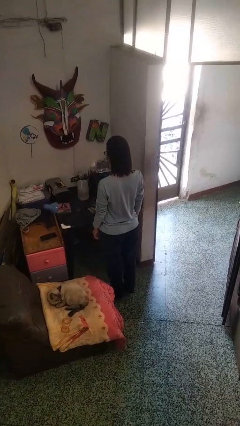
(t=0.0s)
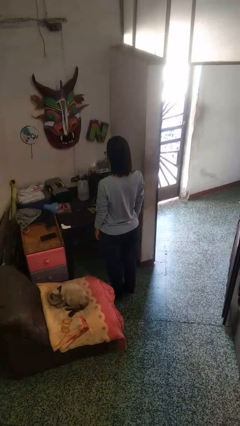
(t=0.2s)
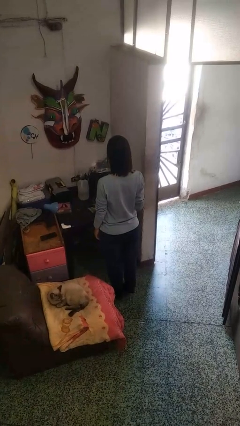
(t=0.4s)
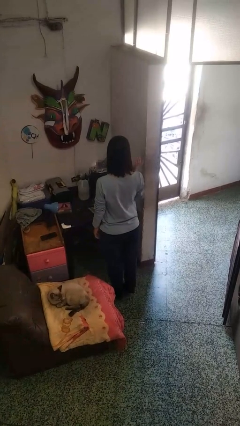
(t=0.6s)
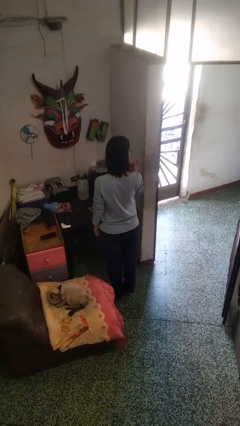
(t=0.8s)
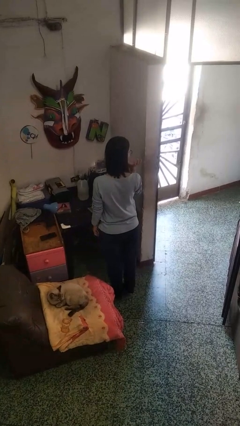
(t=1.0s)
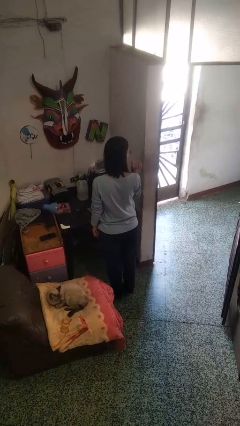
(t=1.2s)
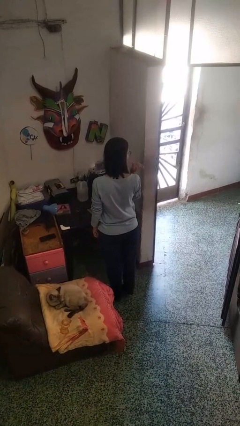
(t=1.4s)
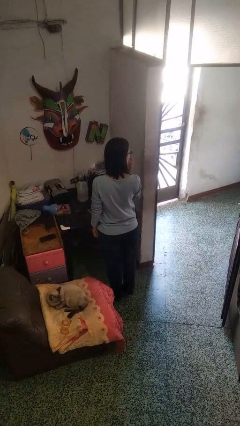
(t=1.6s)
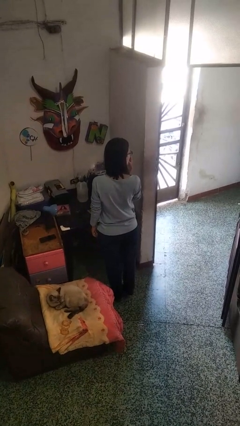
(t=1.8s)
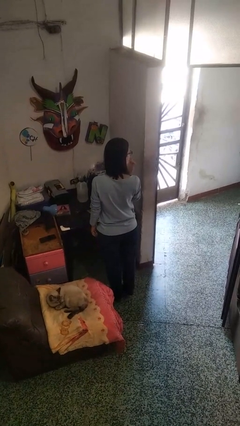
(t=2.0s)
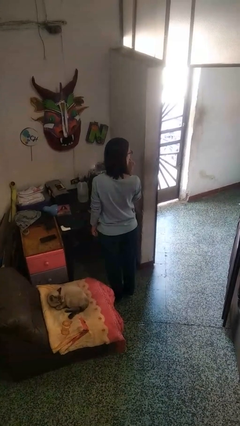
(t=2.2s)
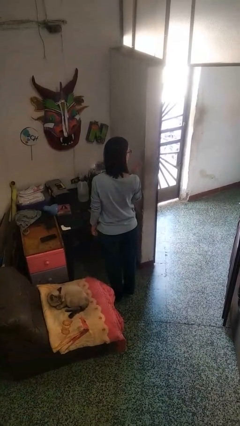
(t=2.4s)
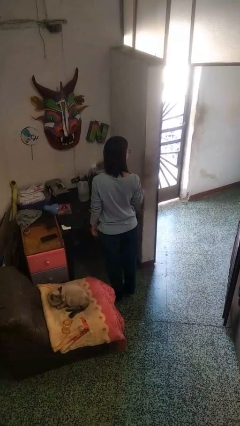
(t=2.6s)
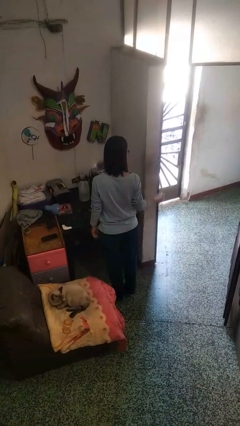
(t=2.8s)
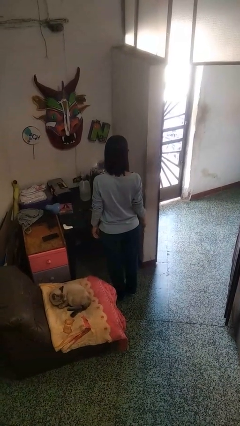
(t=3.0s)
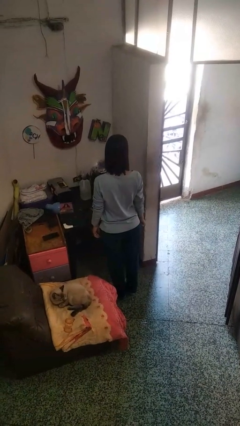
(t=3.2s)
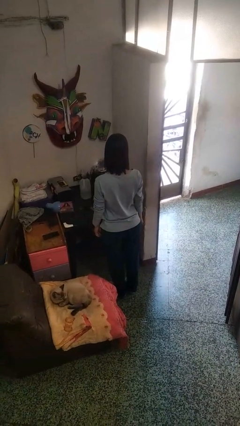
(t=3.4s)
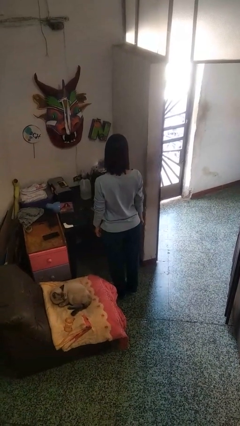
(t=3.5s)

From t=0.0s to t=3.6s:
person licks fingers

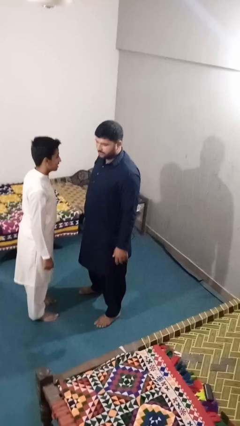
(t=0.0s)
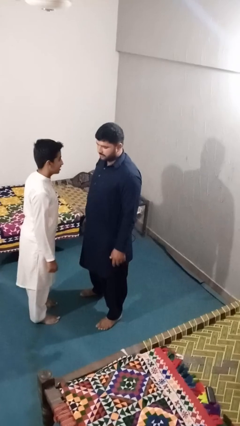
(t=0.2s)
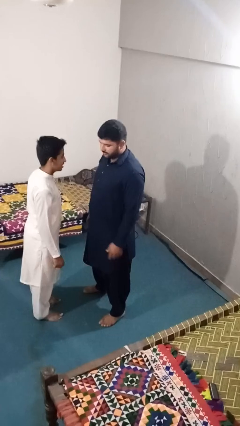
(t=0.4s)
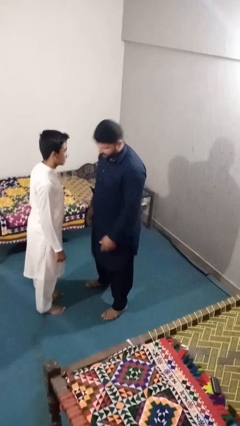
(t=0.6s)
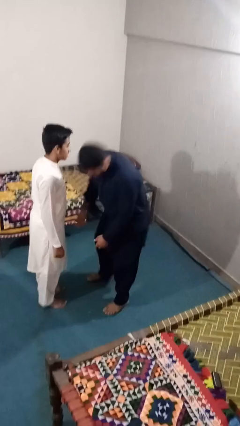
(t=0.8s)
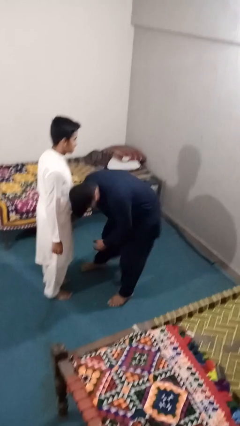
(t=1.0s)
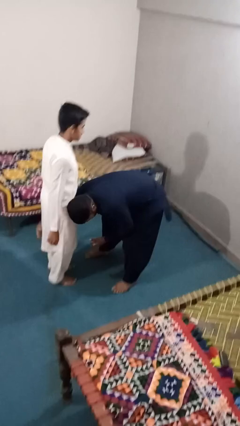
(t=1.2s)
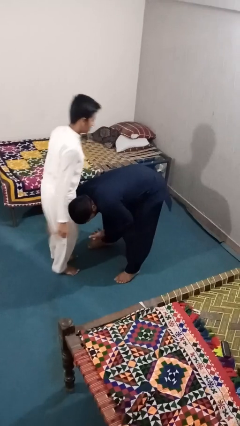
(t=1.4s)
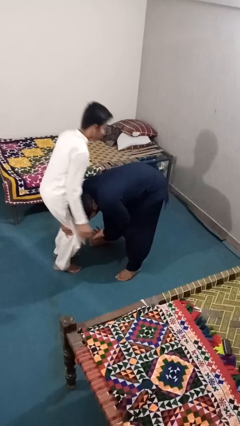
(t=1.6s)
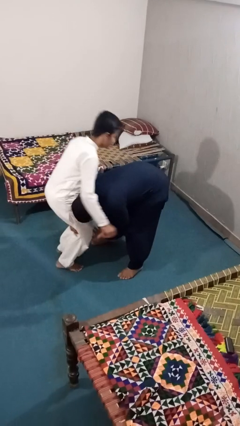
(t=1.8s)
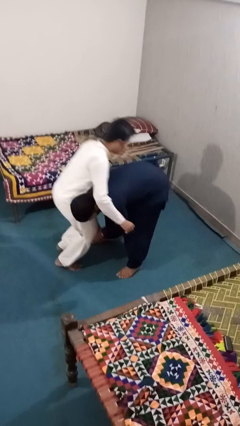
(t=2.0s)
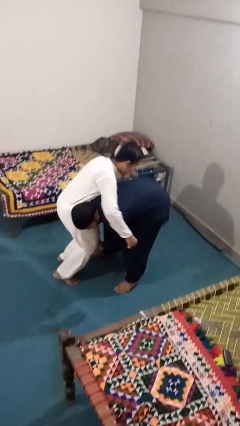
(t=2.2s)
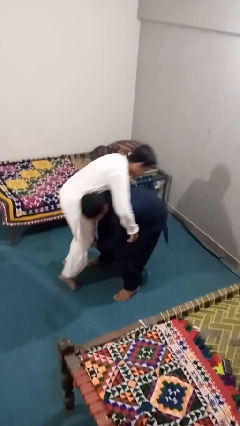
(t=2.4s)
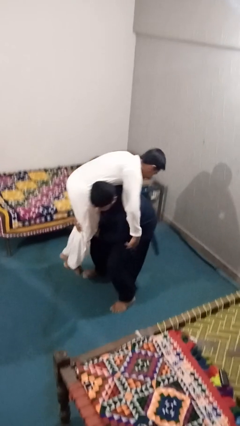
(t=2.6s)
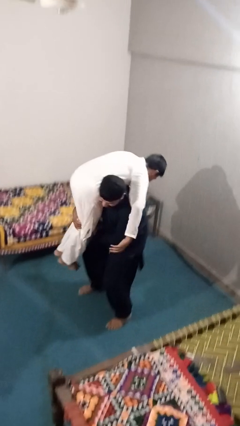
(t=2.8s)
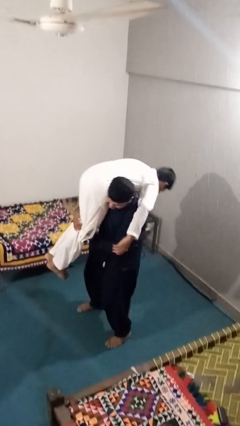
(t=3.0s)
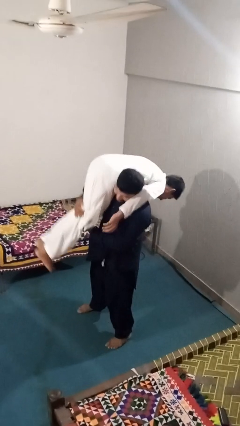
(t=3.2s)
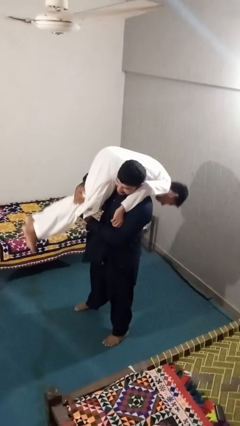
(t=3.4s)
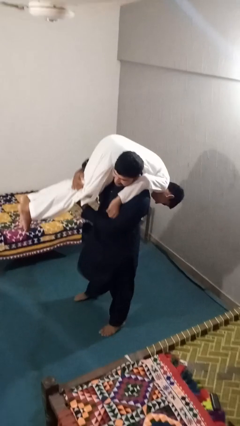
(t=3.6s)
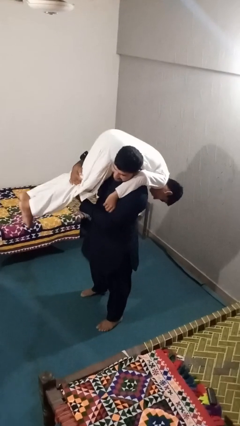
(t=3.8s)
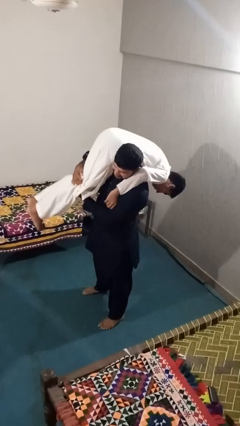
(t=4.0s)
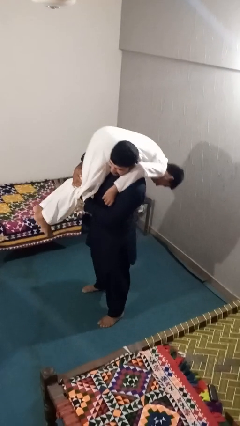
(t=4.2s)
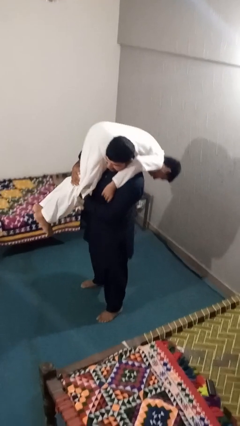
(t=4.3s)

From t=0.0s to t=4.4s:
person carries person over shoulder

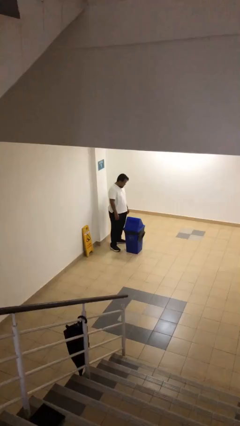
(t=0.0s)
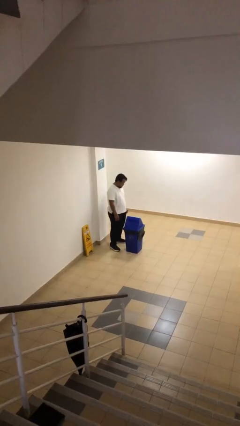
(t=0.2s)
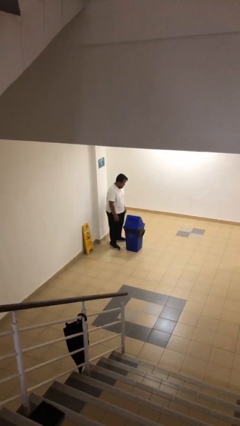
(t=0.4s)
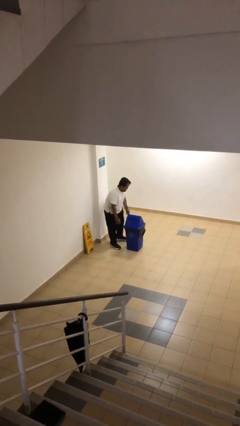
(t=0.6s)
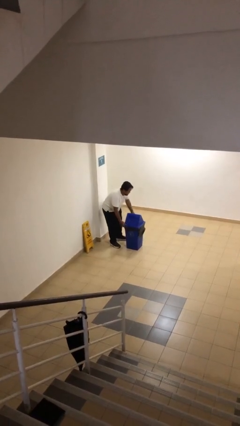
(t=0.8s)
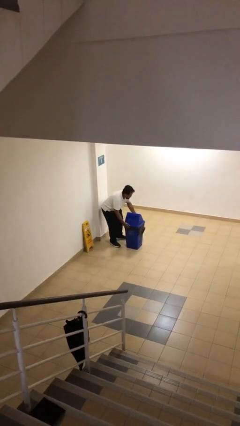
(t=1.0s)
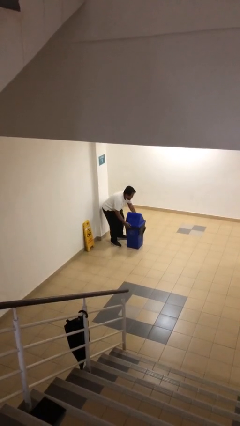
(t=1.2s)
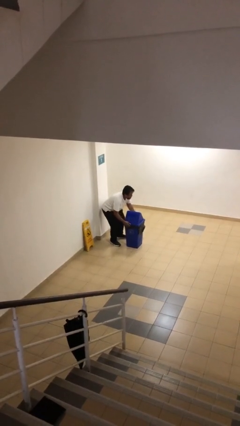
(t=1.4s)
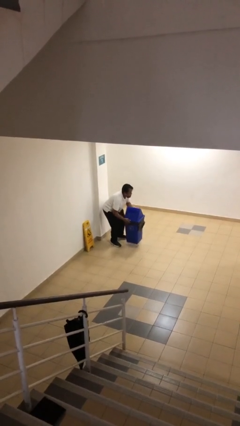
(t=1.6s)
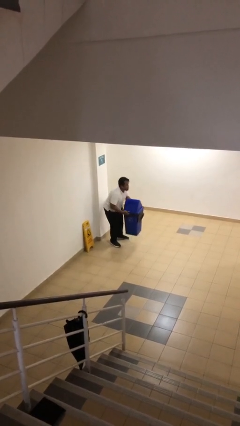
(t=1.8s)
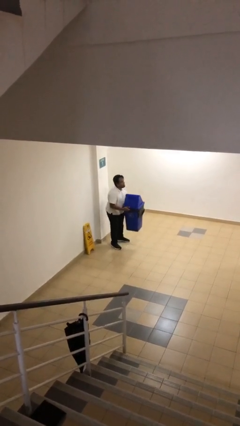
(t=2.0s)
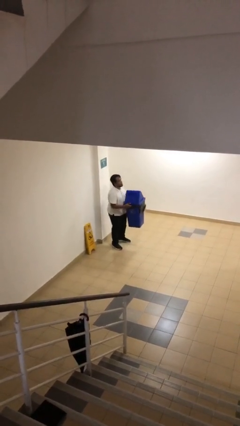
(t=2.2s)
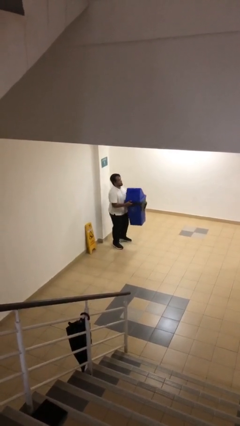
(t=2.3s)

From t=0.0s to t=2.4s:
person picks up object from floor

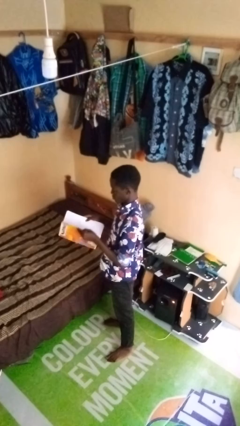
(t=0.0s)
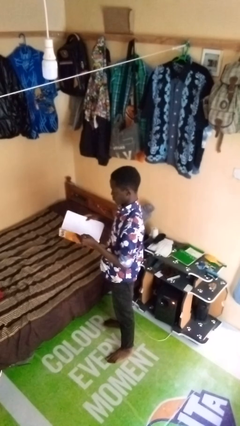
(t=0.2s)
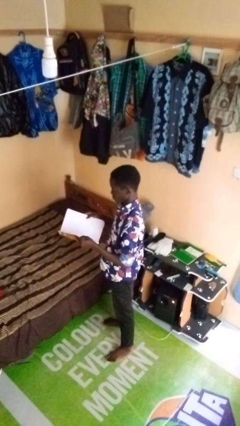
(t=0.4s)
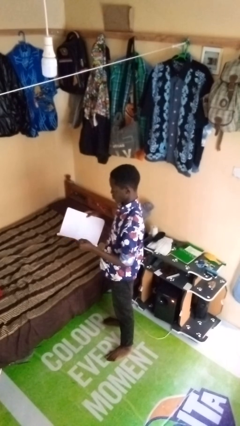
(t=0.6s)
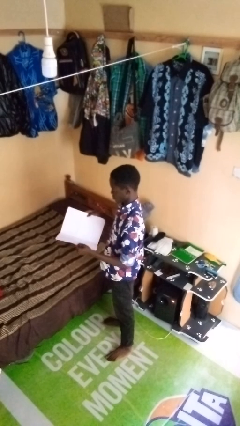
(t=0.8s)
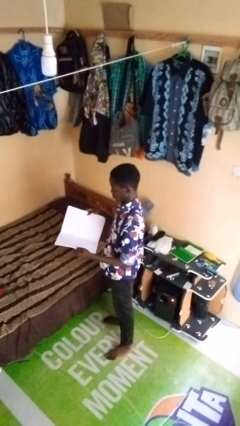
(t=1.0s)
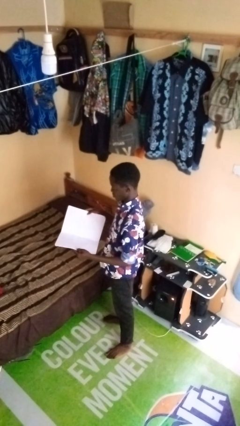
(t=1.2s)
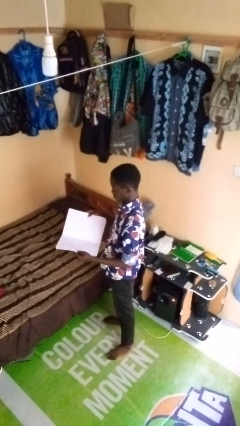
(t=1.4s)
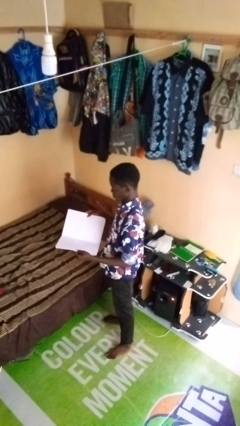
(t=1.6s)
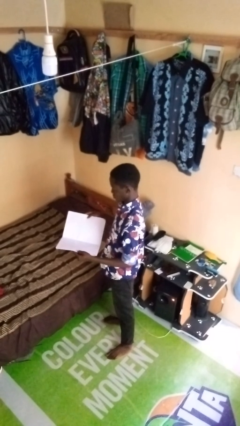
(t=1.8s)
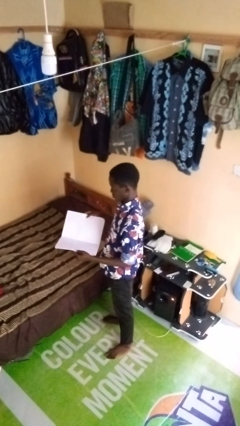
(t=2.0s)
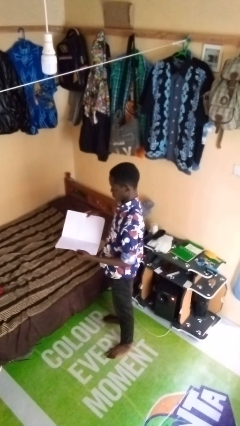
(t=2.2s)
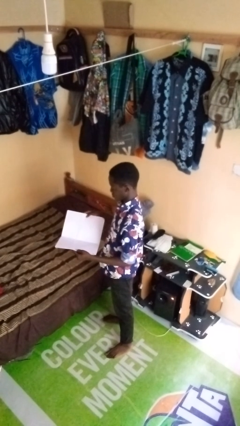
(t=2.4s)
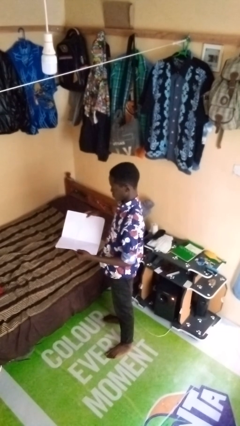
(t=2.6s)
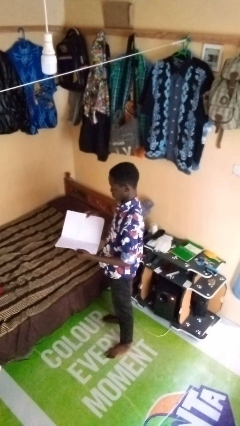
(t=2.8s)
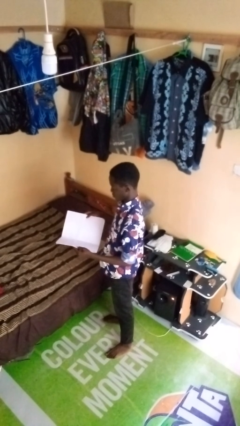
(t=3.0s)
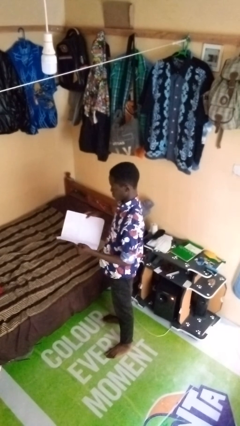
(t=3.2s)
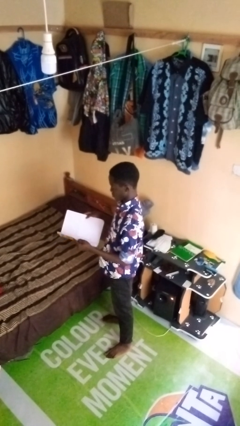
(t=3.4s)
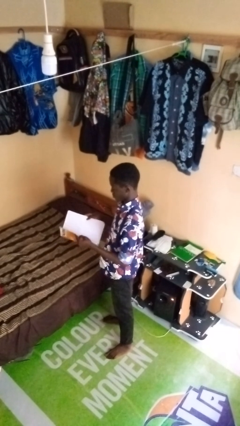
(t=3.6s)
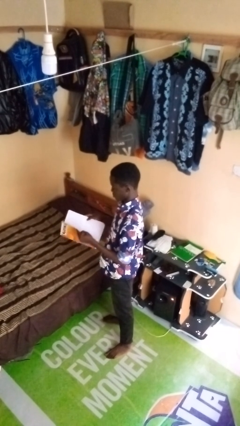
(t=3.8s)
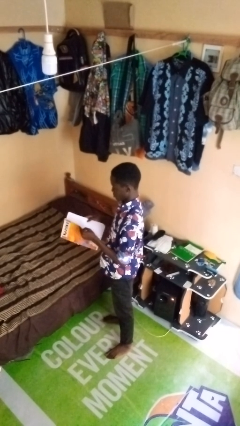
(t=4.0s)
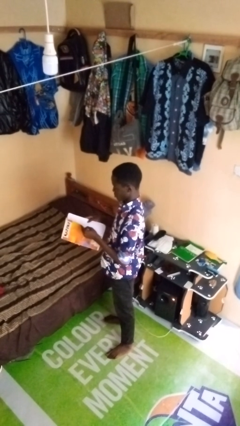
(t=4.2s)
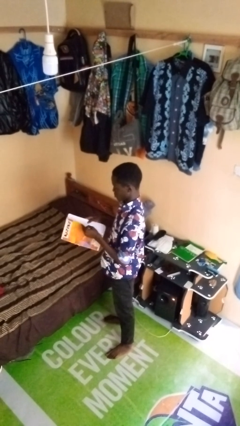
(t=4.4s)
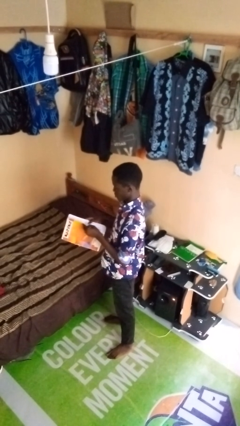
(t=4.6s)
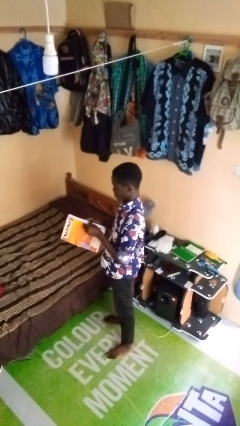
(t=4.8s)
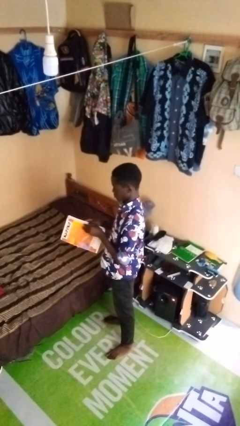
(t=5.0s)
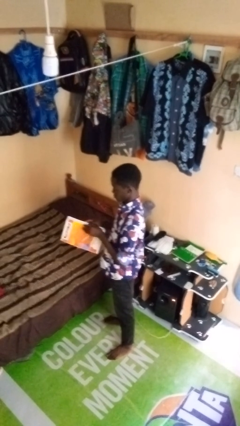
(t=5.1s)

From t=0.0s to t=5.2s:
person reads book

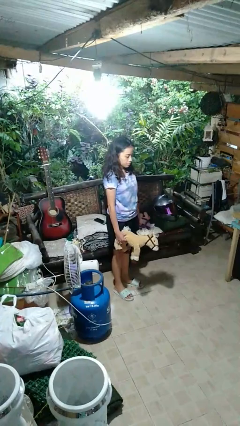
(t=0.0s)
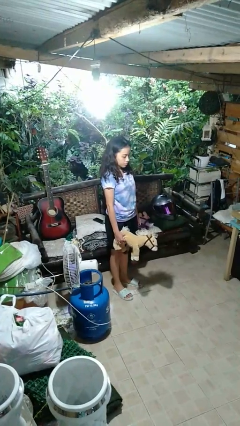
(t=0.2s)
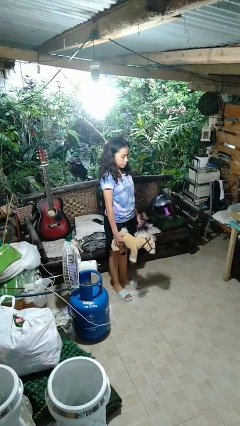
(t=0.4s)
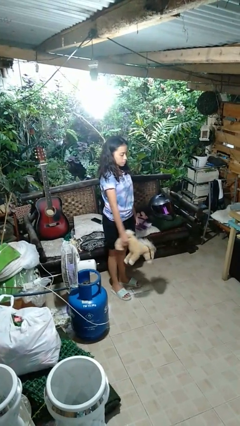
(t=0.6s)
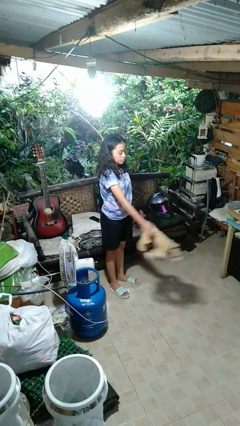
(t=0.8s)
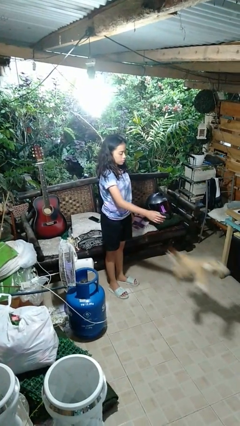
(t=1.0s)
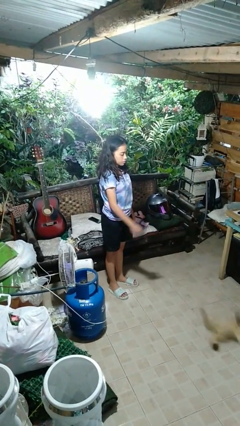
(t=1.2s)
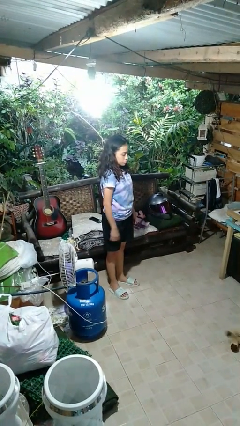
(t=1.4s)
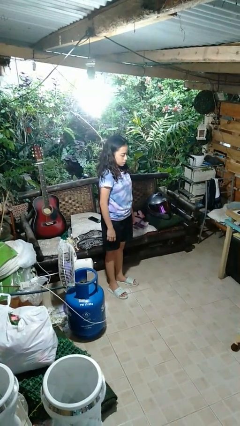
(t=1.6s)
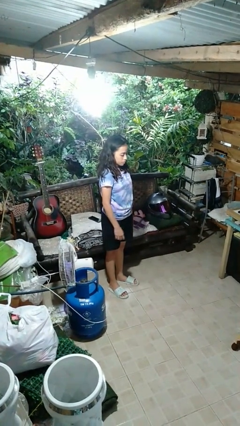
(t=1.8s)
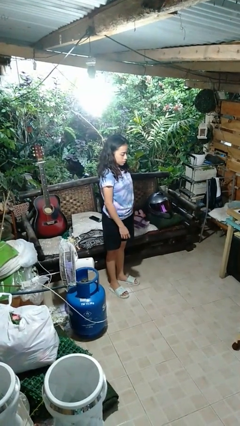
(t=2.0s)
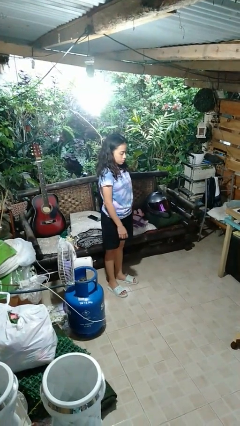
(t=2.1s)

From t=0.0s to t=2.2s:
person throws object to ground
